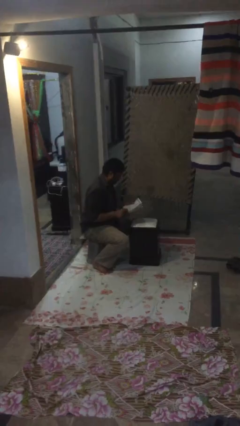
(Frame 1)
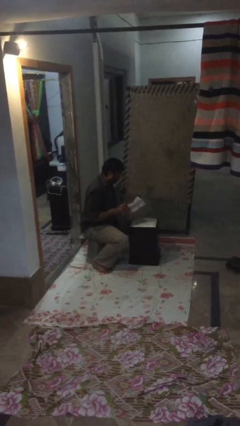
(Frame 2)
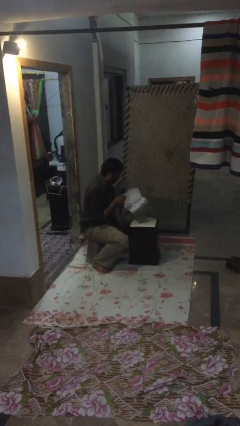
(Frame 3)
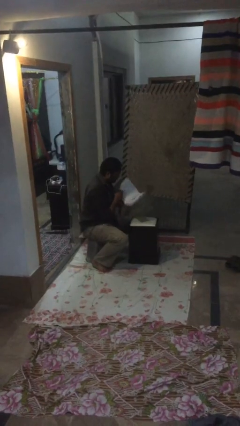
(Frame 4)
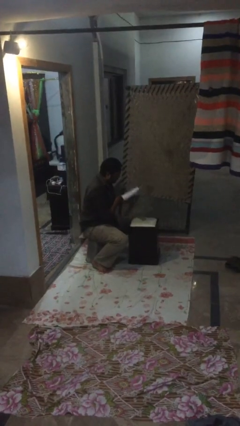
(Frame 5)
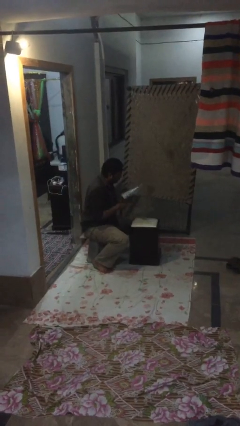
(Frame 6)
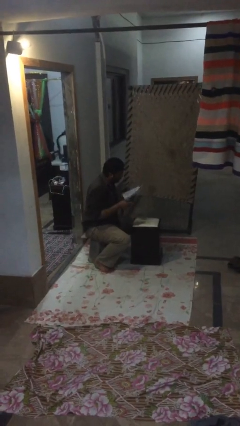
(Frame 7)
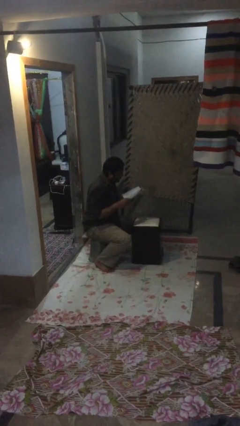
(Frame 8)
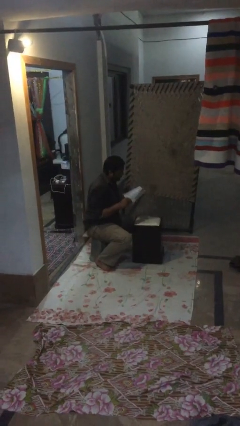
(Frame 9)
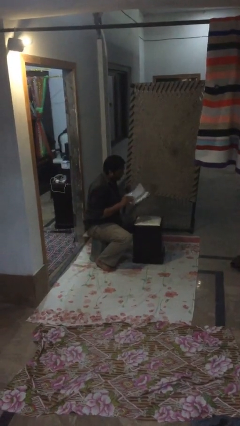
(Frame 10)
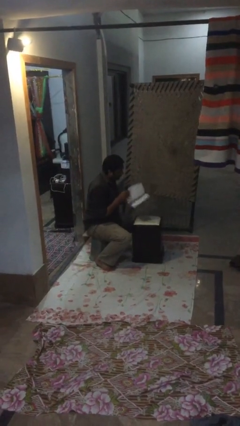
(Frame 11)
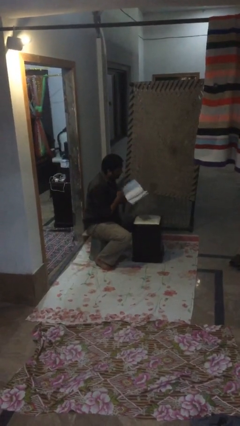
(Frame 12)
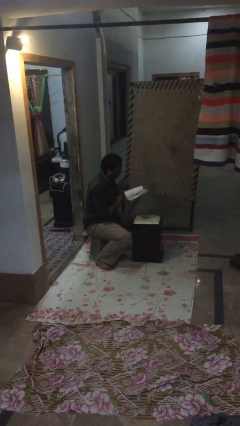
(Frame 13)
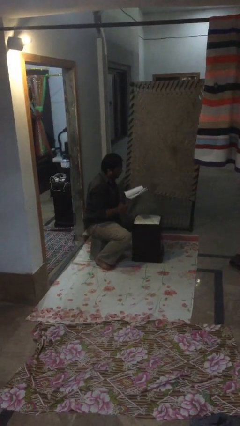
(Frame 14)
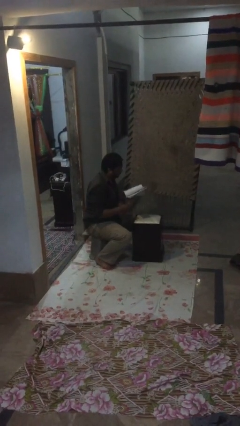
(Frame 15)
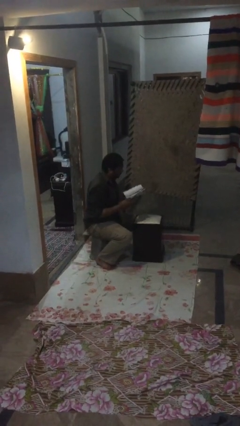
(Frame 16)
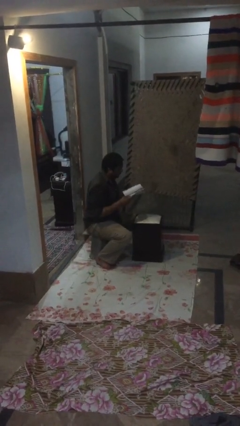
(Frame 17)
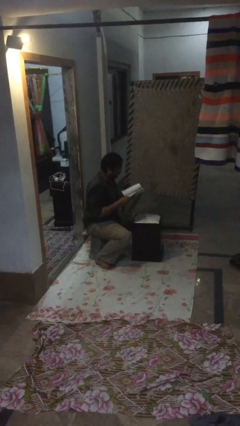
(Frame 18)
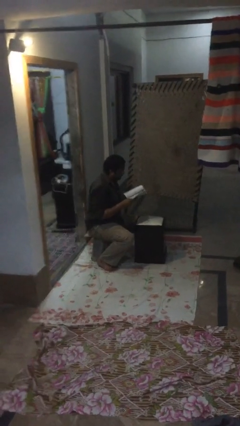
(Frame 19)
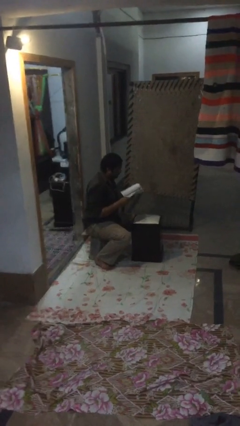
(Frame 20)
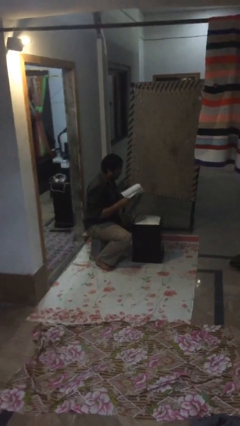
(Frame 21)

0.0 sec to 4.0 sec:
person reads document

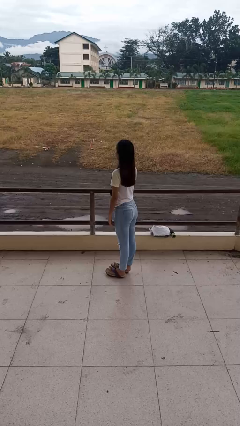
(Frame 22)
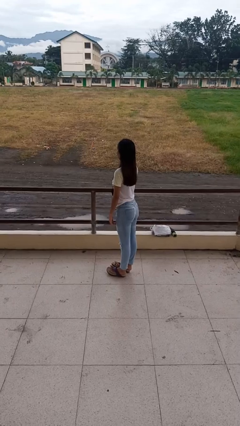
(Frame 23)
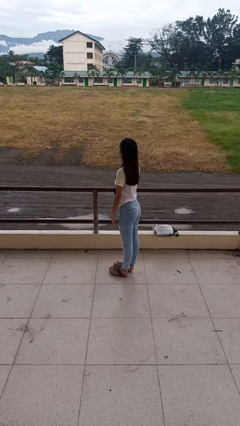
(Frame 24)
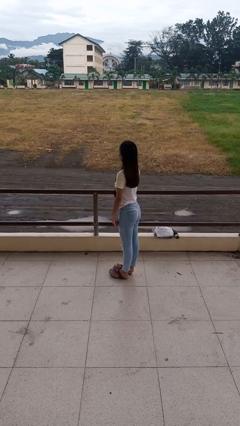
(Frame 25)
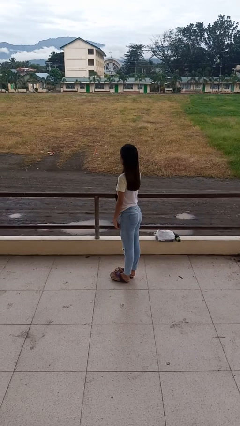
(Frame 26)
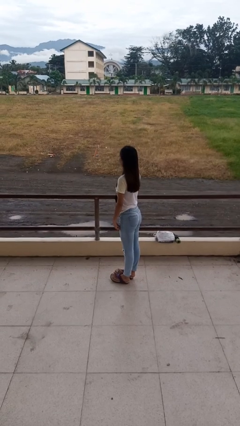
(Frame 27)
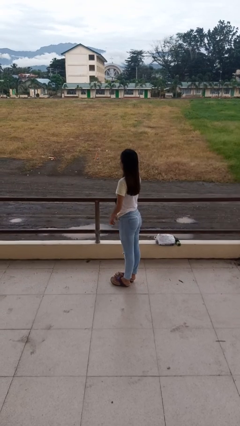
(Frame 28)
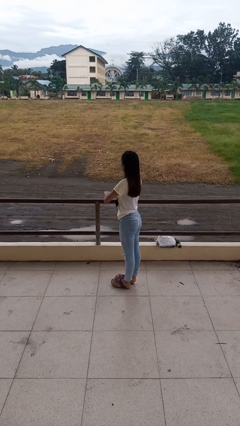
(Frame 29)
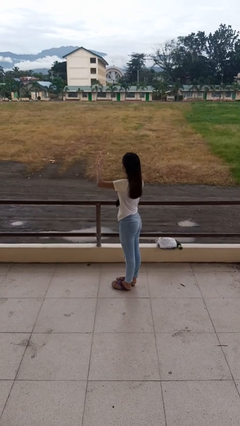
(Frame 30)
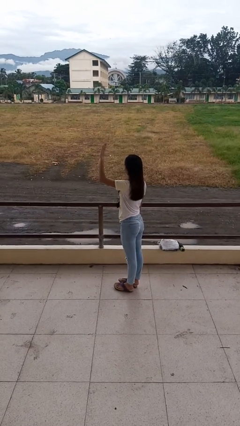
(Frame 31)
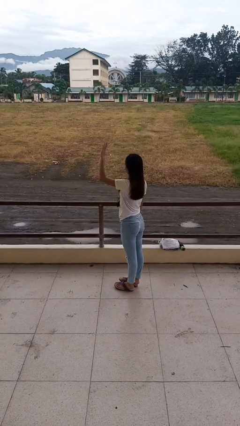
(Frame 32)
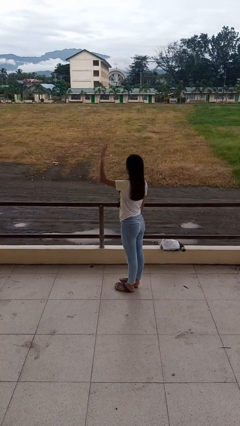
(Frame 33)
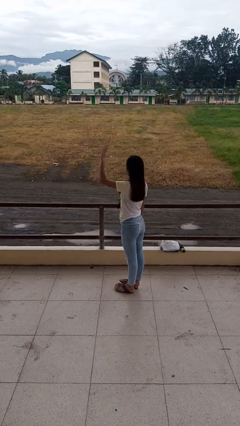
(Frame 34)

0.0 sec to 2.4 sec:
person gestures swipe up

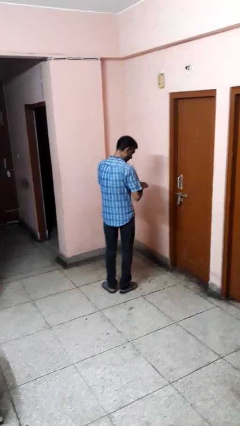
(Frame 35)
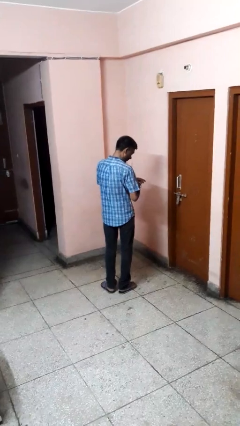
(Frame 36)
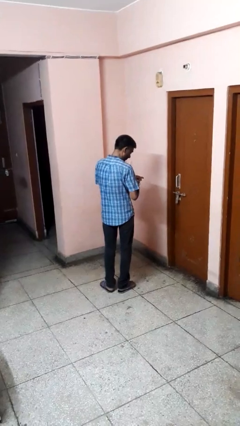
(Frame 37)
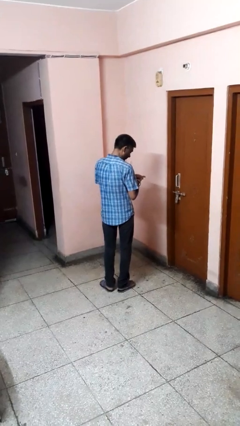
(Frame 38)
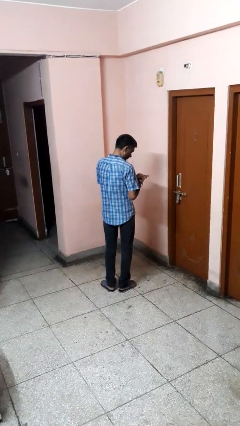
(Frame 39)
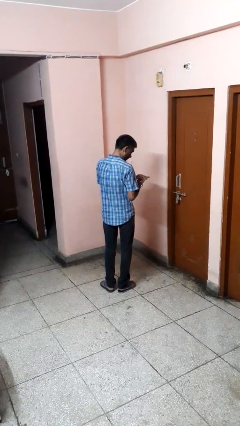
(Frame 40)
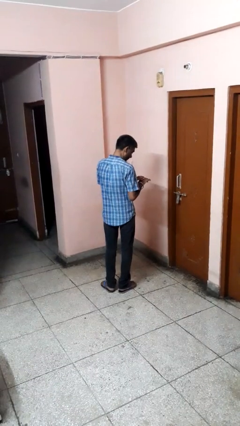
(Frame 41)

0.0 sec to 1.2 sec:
person swats bug

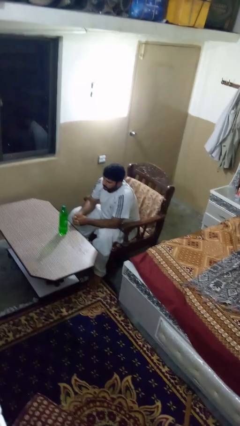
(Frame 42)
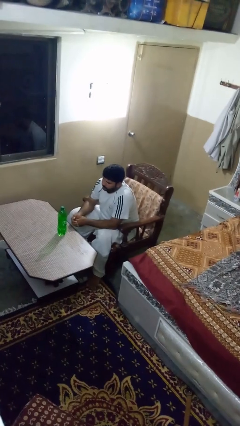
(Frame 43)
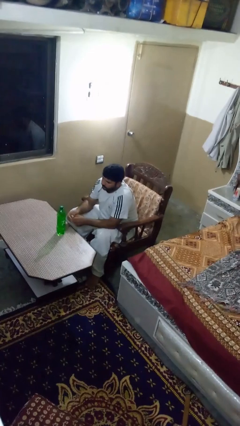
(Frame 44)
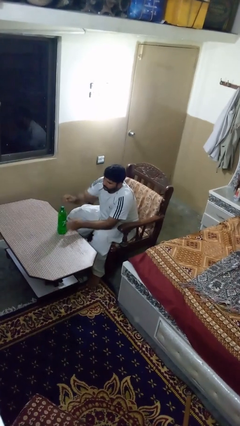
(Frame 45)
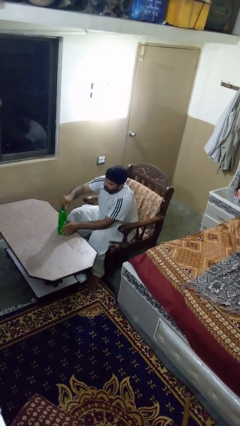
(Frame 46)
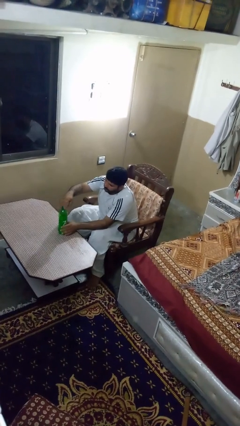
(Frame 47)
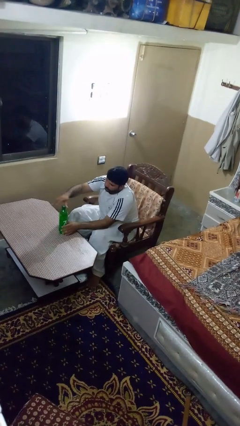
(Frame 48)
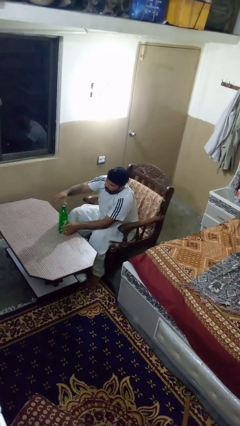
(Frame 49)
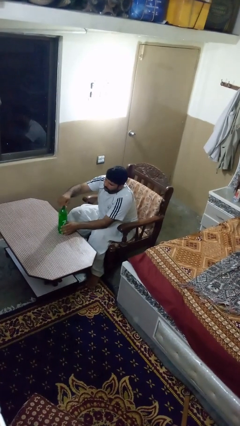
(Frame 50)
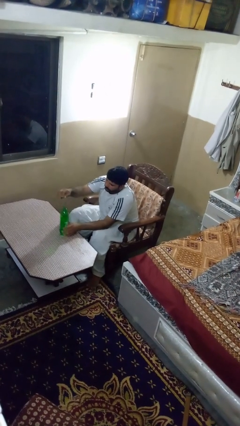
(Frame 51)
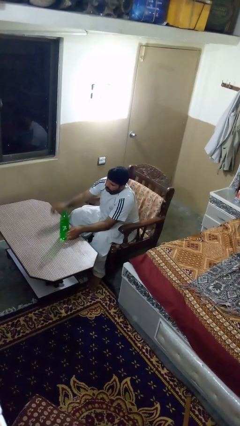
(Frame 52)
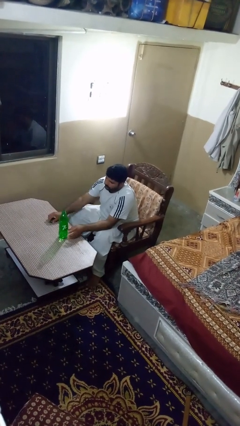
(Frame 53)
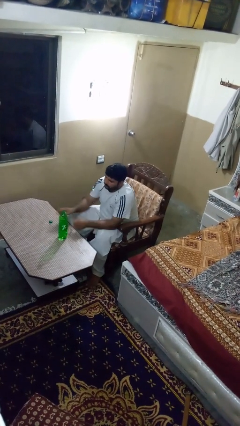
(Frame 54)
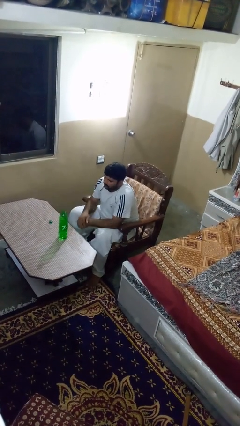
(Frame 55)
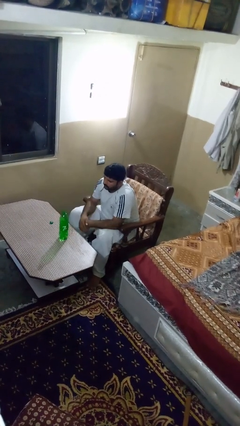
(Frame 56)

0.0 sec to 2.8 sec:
person unscrews lid from bottle

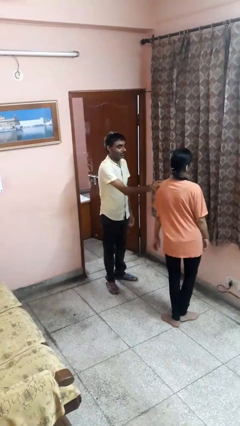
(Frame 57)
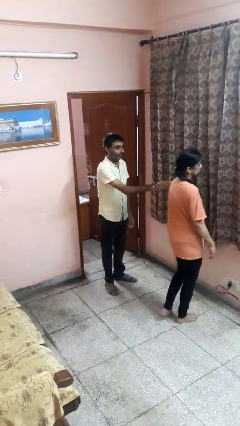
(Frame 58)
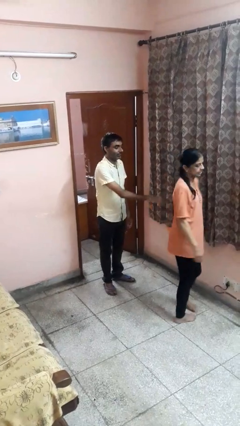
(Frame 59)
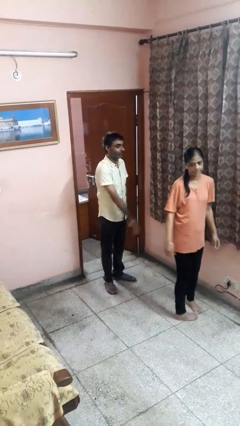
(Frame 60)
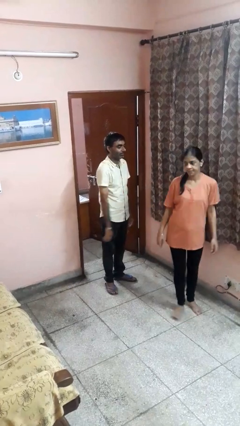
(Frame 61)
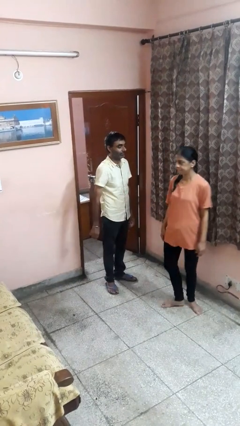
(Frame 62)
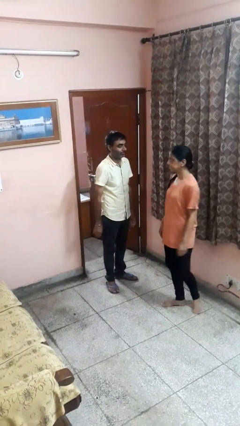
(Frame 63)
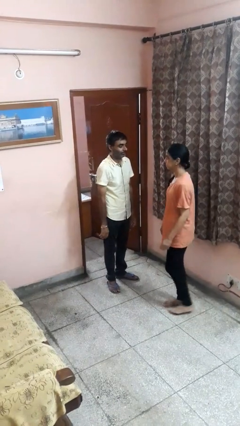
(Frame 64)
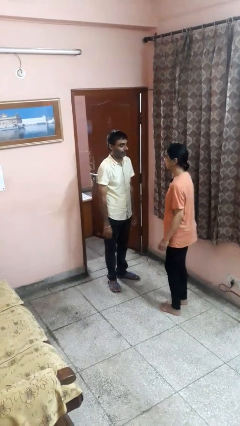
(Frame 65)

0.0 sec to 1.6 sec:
person spins person around

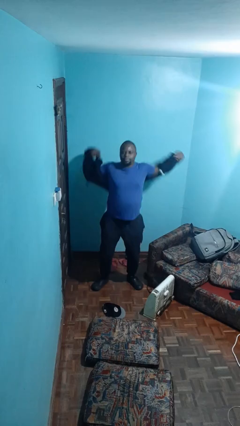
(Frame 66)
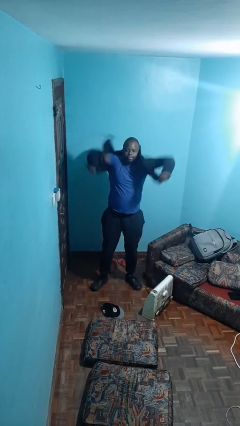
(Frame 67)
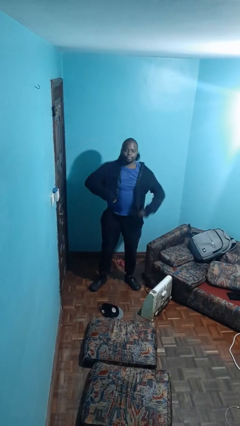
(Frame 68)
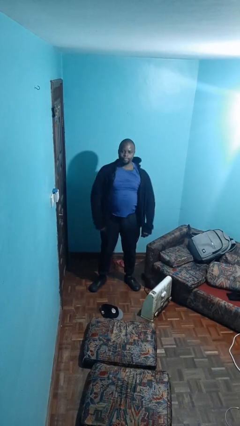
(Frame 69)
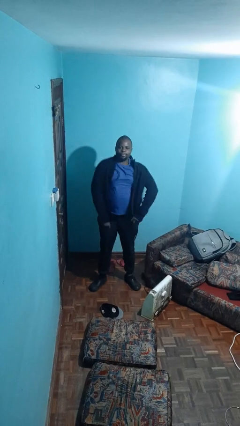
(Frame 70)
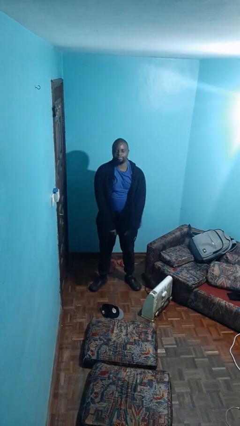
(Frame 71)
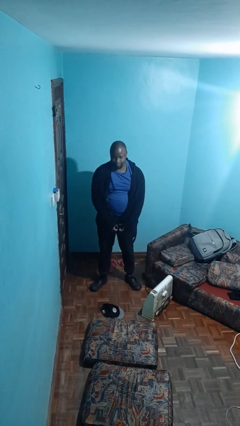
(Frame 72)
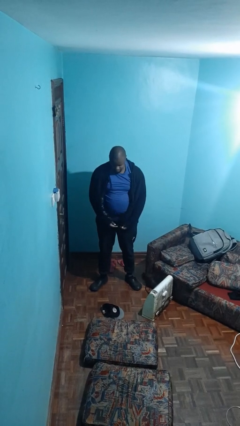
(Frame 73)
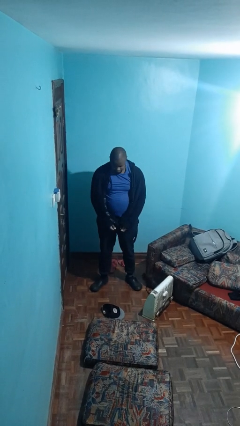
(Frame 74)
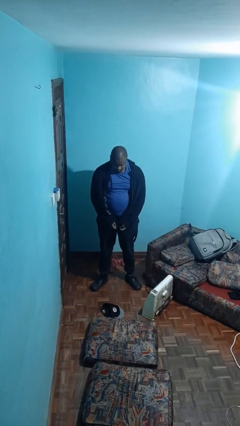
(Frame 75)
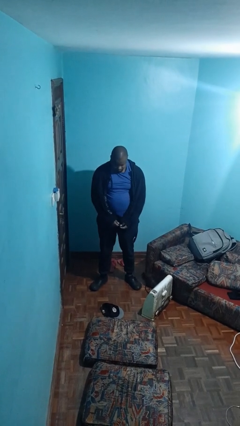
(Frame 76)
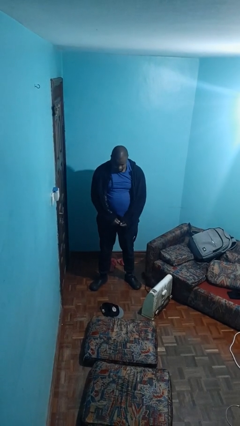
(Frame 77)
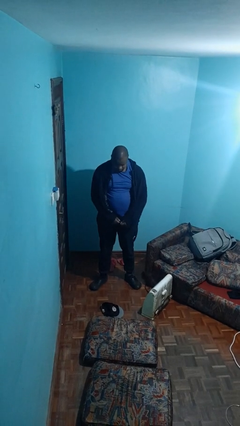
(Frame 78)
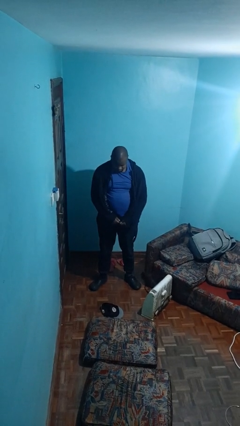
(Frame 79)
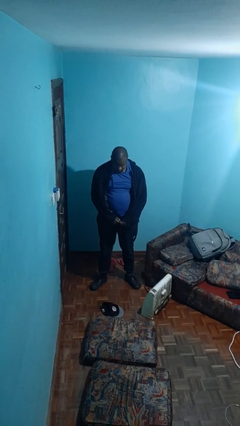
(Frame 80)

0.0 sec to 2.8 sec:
person puts on jacket

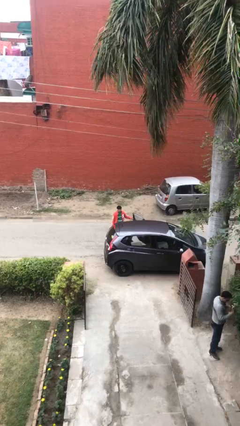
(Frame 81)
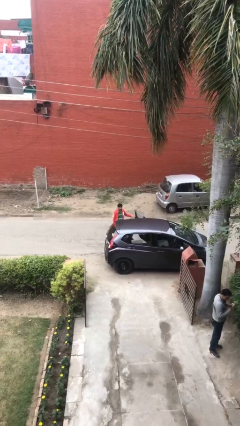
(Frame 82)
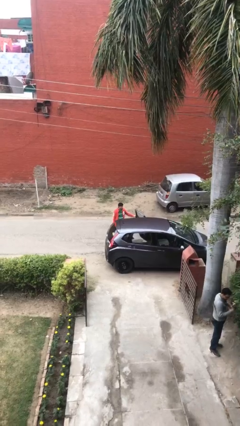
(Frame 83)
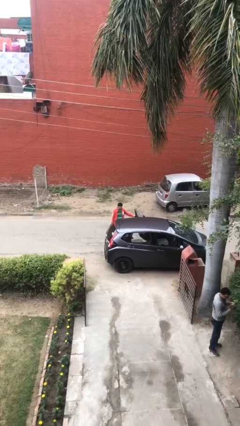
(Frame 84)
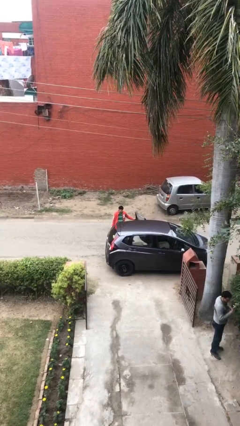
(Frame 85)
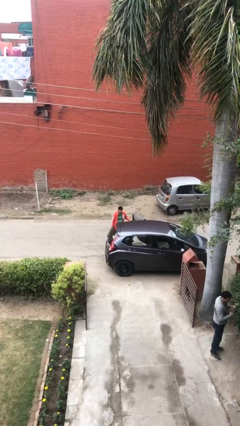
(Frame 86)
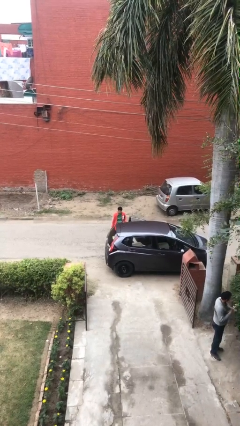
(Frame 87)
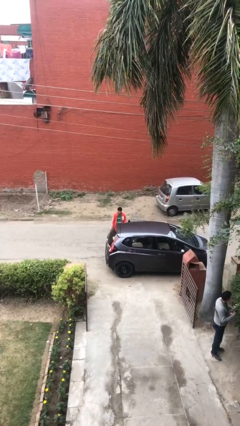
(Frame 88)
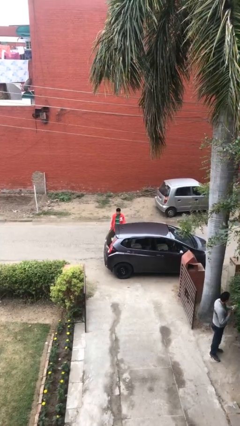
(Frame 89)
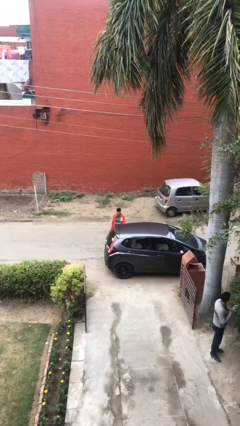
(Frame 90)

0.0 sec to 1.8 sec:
person closes car door
